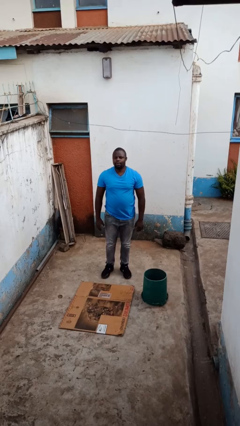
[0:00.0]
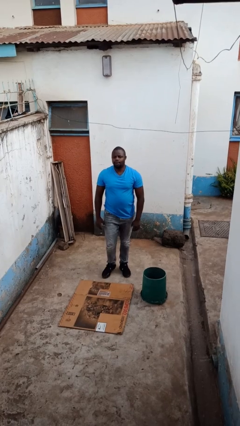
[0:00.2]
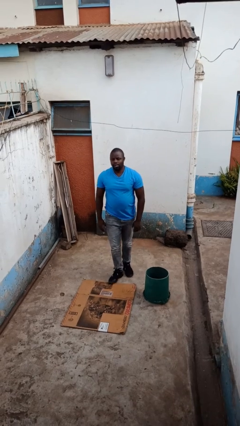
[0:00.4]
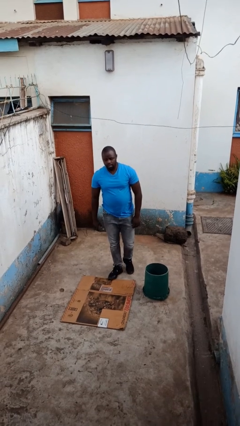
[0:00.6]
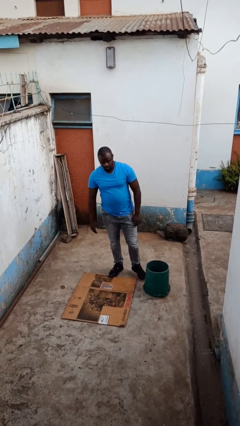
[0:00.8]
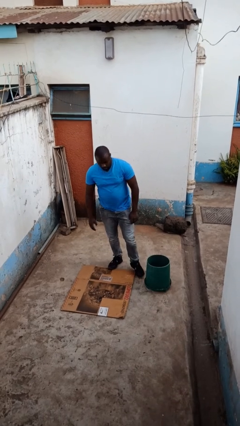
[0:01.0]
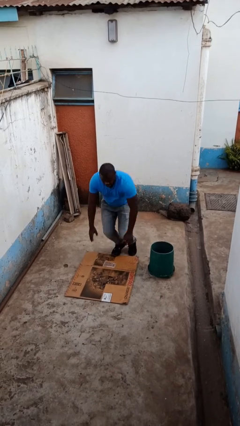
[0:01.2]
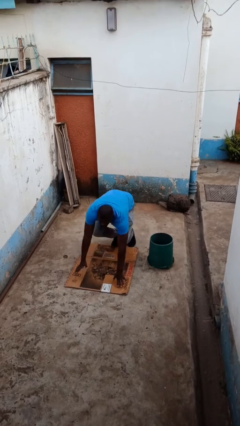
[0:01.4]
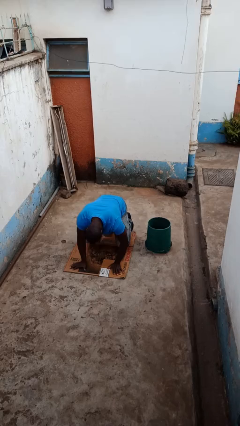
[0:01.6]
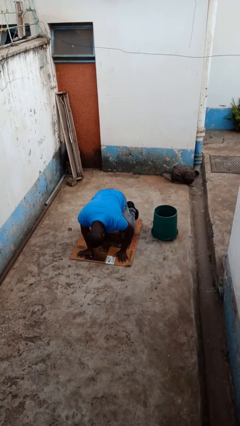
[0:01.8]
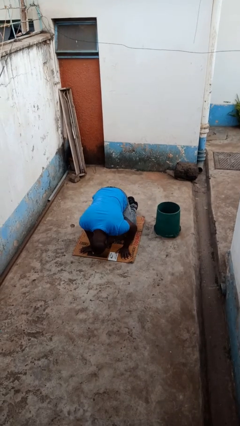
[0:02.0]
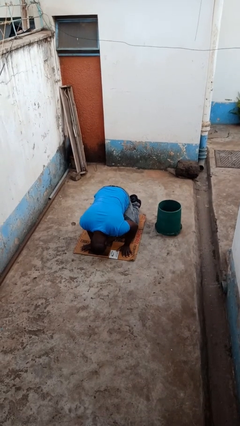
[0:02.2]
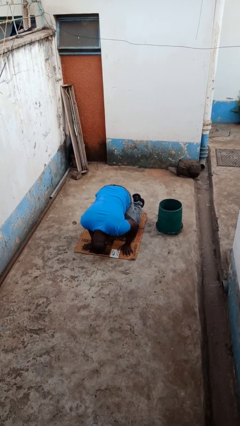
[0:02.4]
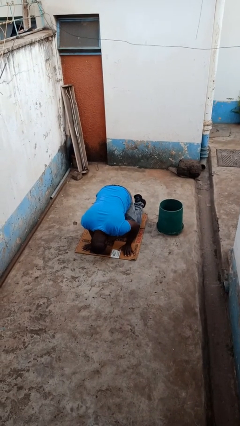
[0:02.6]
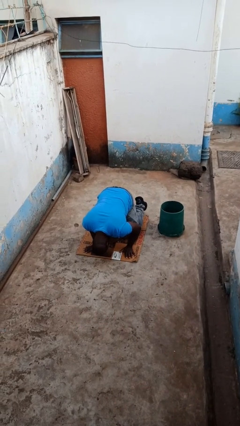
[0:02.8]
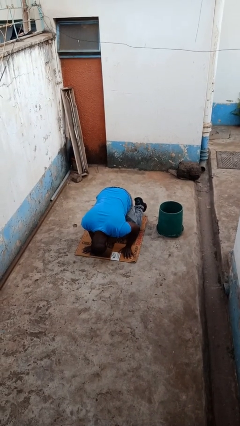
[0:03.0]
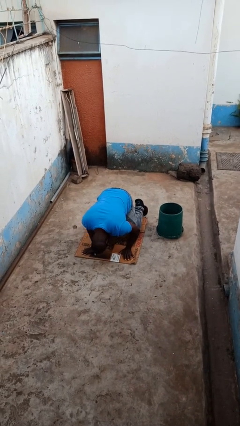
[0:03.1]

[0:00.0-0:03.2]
person trips on object on floor

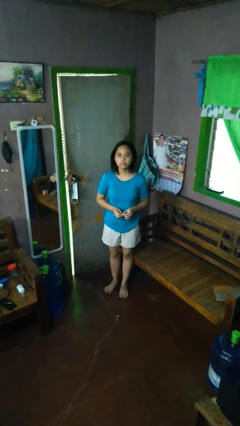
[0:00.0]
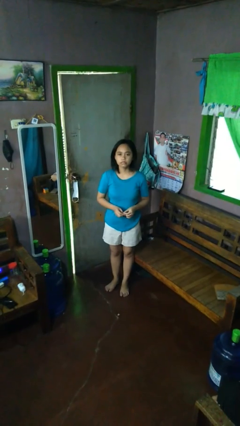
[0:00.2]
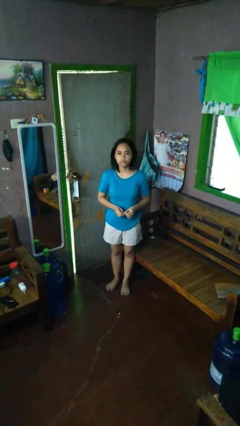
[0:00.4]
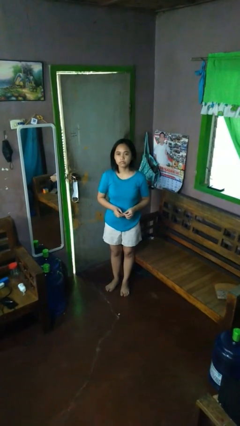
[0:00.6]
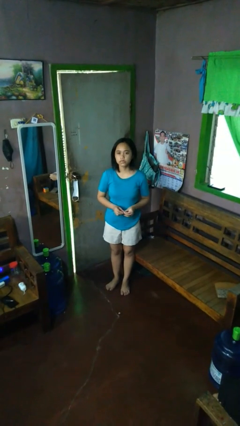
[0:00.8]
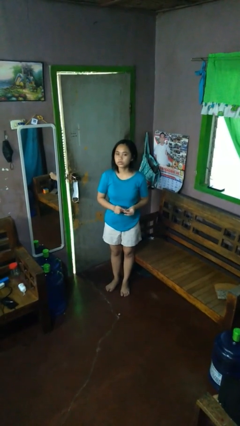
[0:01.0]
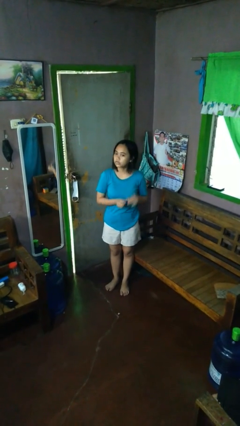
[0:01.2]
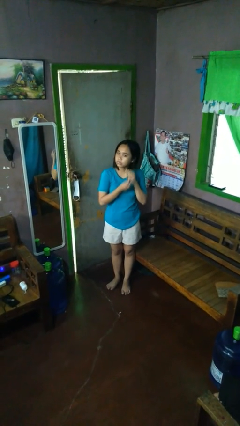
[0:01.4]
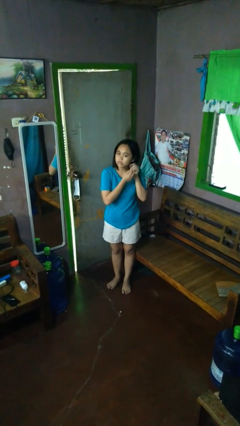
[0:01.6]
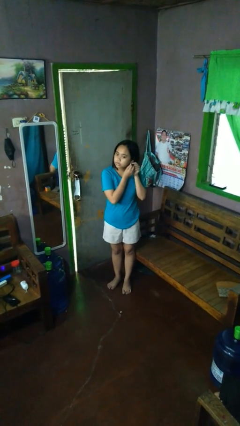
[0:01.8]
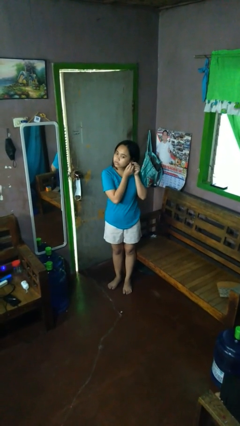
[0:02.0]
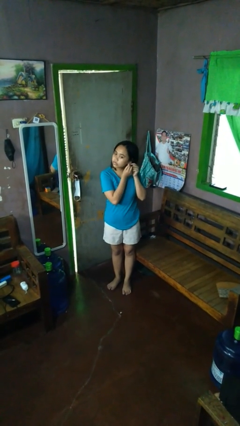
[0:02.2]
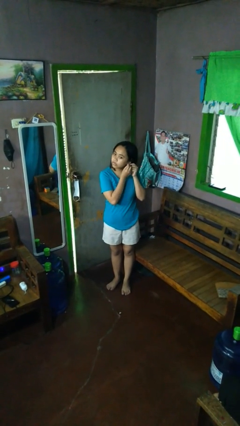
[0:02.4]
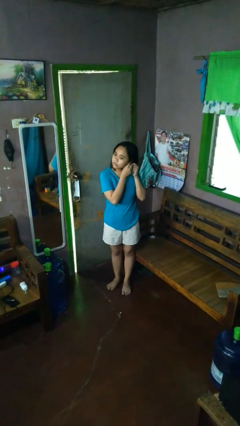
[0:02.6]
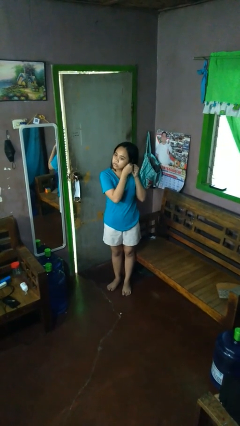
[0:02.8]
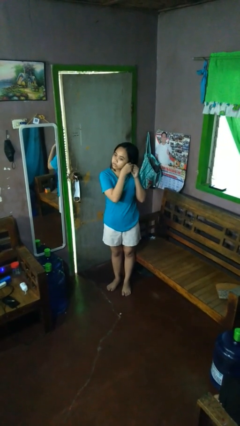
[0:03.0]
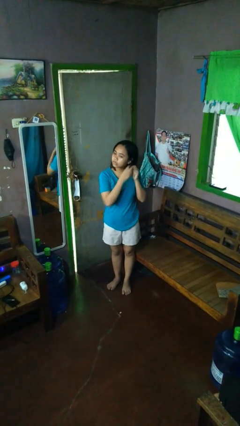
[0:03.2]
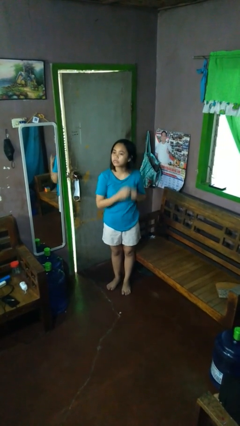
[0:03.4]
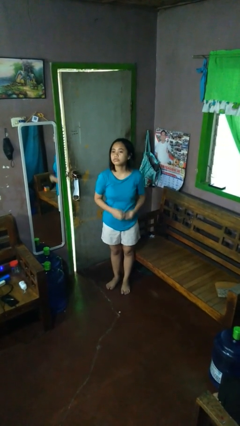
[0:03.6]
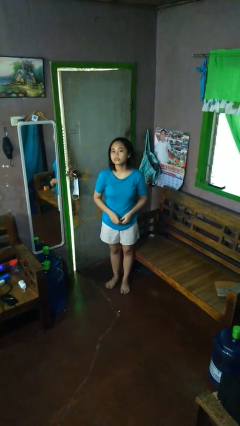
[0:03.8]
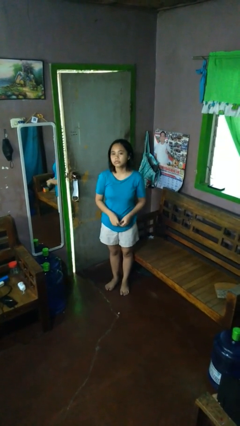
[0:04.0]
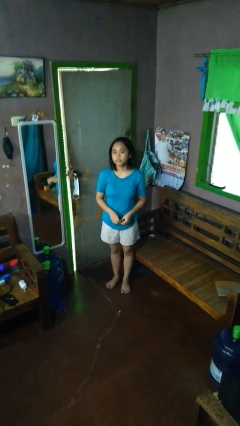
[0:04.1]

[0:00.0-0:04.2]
person puts on earrings

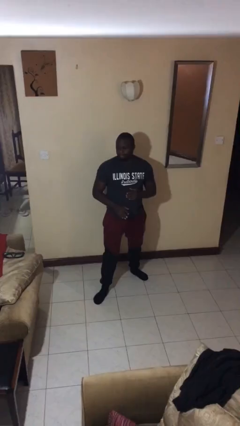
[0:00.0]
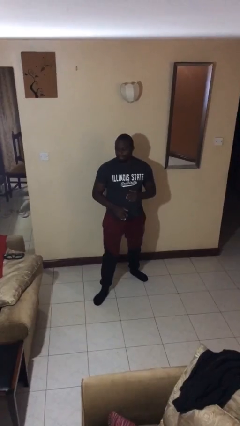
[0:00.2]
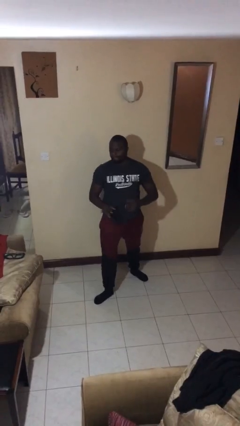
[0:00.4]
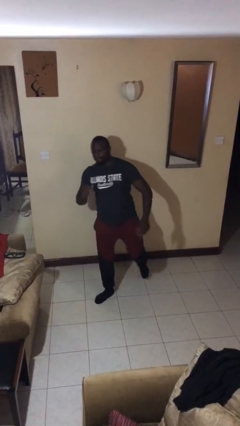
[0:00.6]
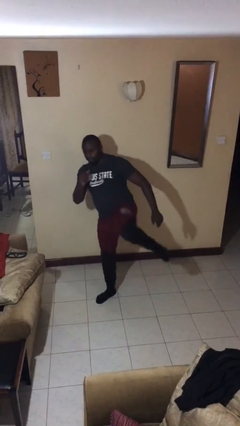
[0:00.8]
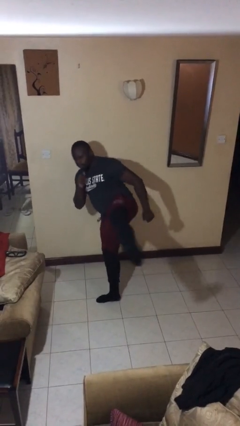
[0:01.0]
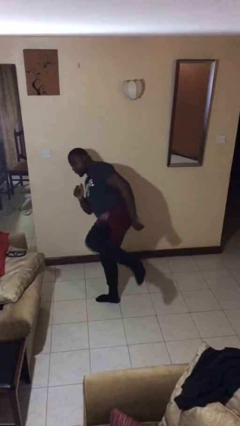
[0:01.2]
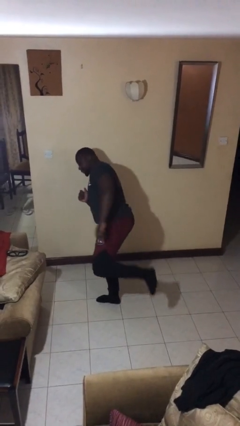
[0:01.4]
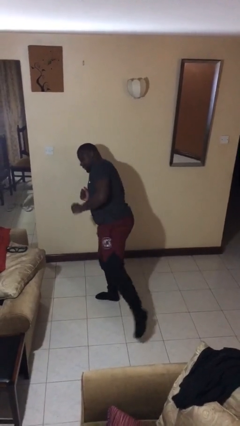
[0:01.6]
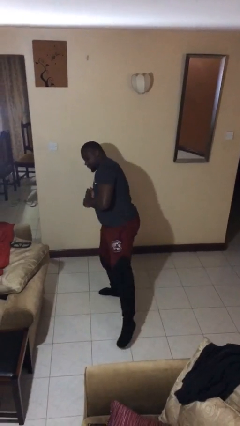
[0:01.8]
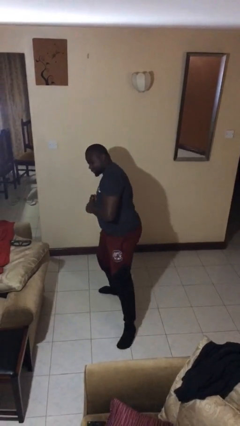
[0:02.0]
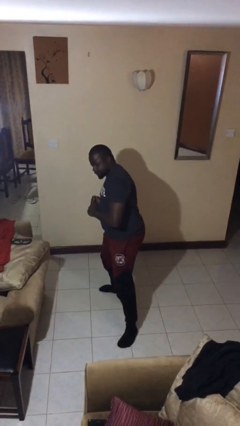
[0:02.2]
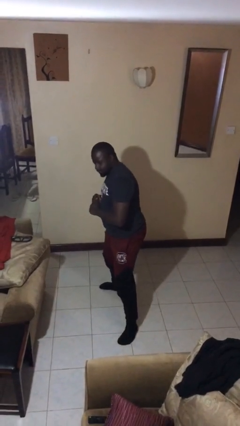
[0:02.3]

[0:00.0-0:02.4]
person karate kicks

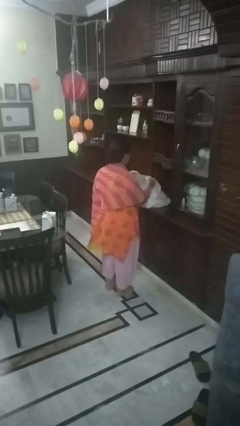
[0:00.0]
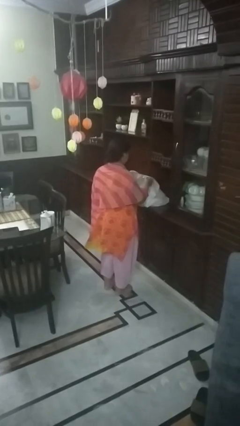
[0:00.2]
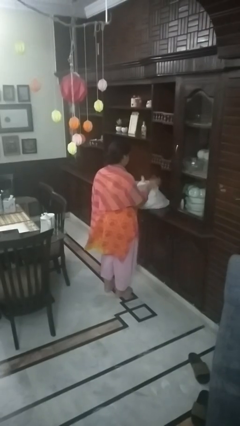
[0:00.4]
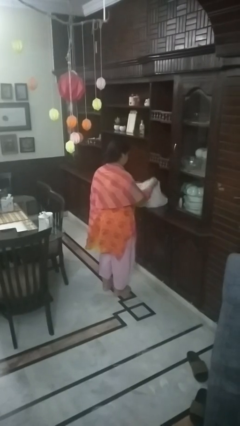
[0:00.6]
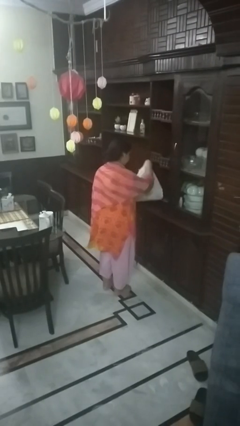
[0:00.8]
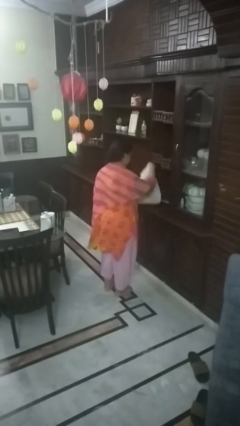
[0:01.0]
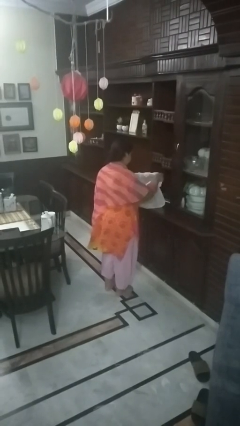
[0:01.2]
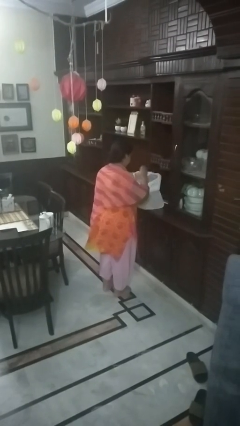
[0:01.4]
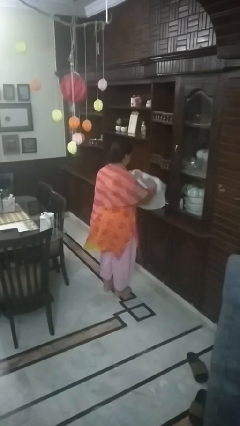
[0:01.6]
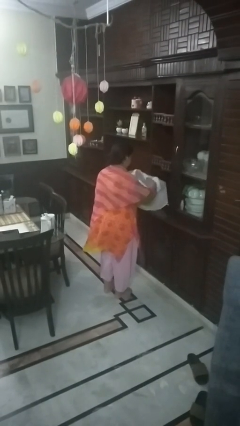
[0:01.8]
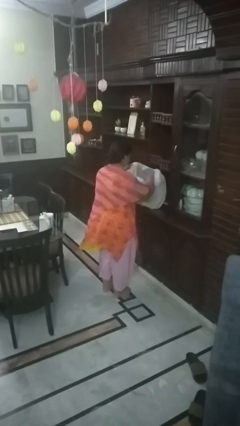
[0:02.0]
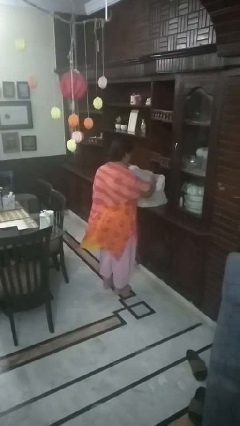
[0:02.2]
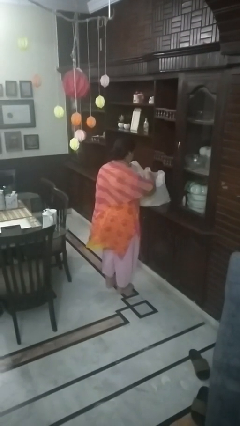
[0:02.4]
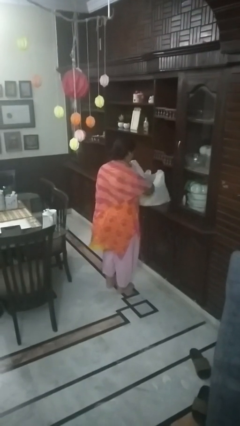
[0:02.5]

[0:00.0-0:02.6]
person searches in bag

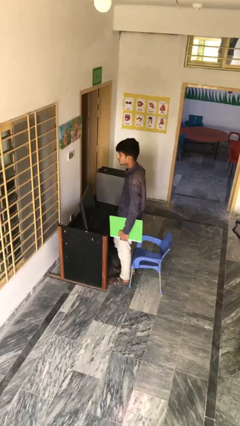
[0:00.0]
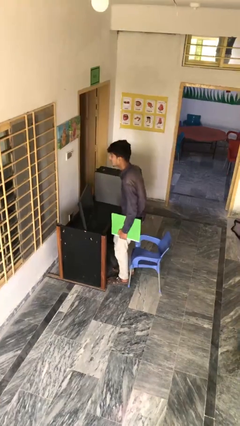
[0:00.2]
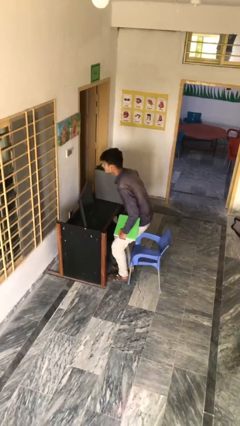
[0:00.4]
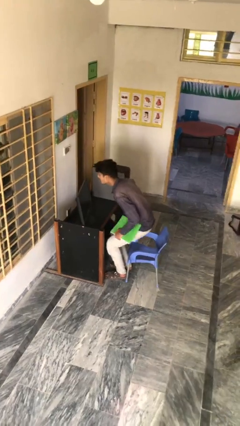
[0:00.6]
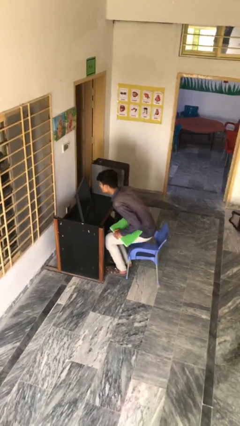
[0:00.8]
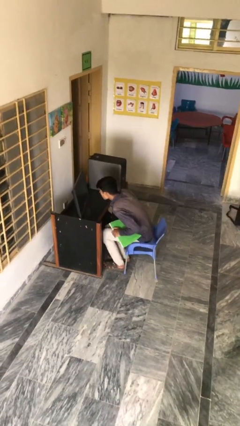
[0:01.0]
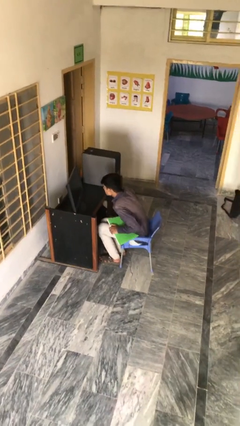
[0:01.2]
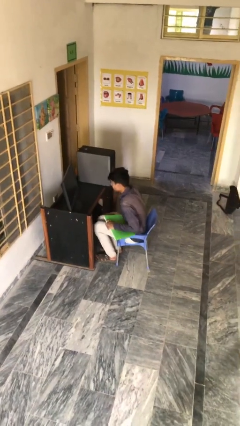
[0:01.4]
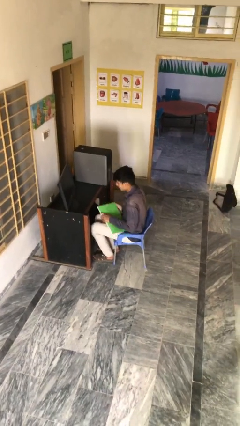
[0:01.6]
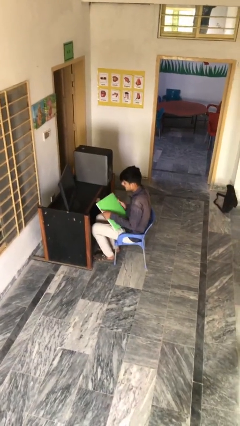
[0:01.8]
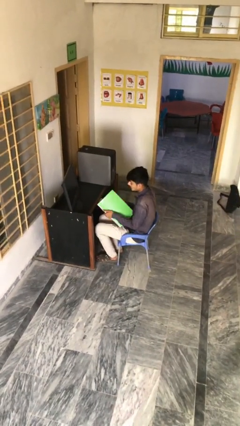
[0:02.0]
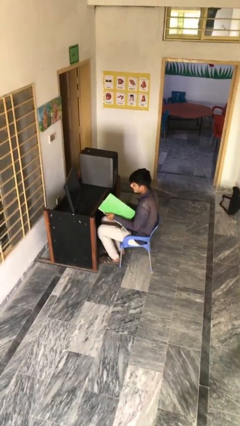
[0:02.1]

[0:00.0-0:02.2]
person sits down

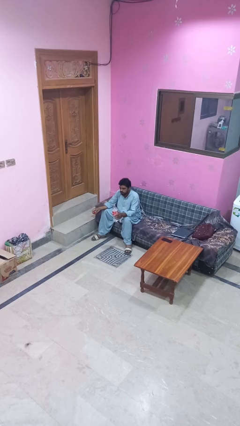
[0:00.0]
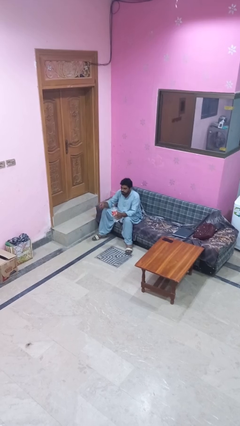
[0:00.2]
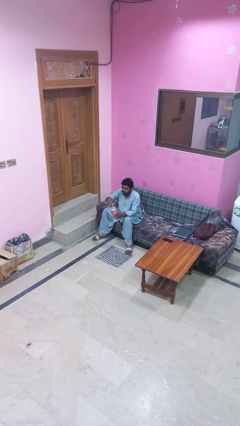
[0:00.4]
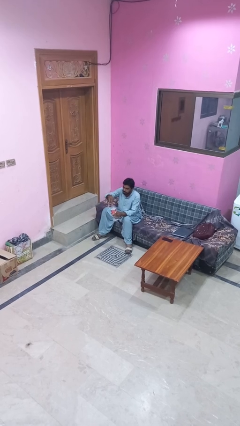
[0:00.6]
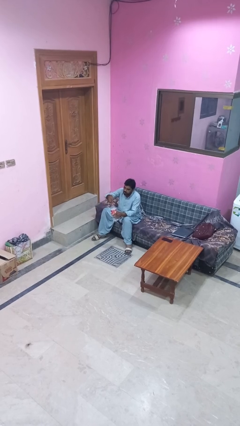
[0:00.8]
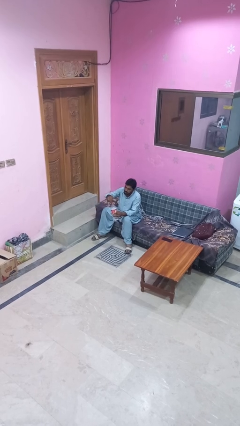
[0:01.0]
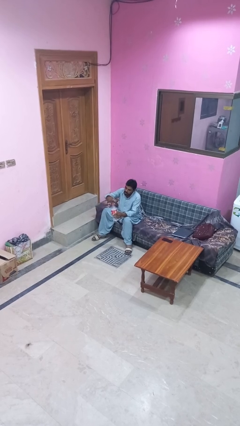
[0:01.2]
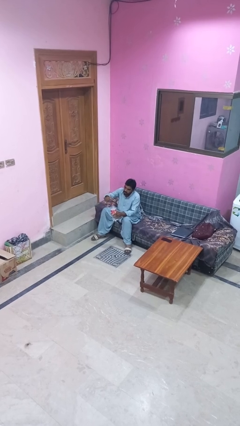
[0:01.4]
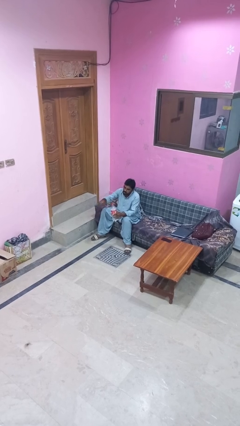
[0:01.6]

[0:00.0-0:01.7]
person screws lid to bottle

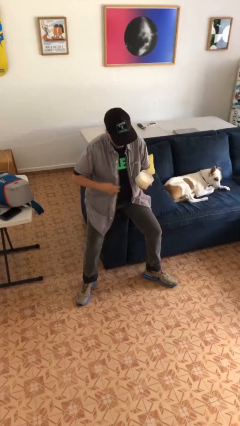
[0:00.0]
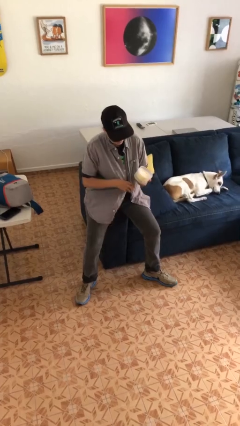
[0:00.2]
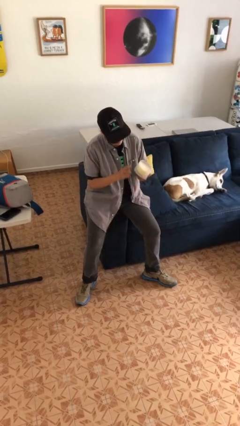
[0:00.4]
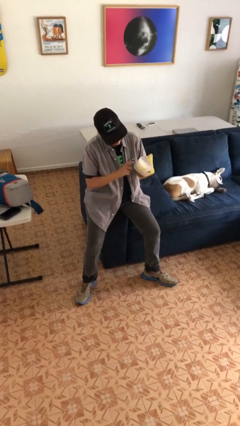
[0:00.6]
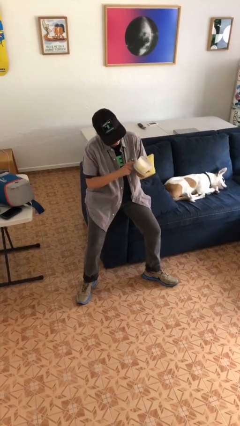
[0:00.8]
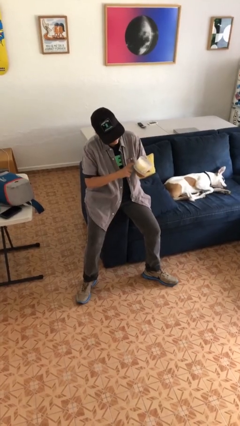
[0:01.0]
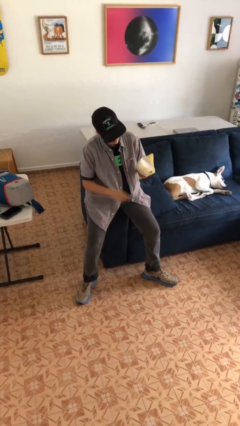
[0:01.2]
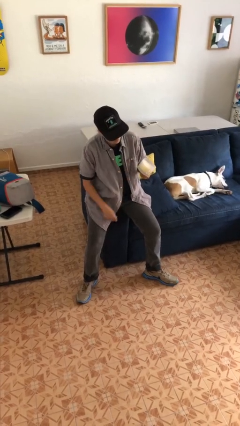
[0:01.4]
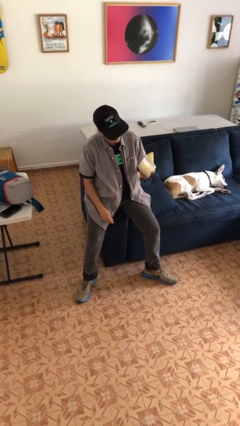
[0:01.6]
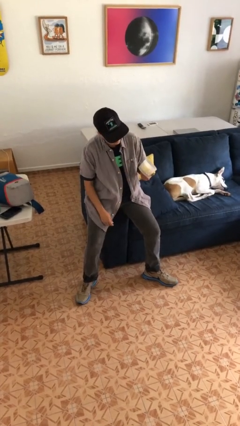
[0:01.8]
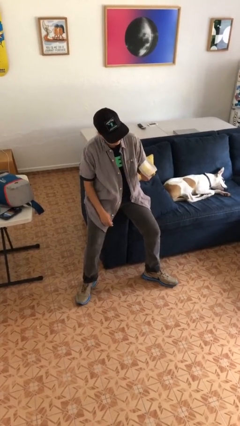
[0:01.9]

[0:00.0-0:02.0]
person taps object with finger
